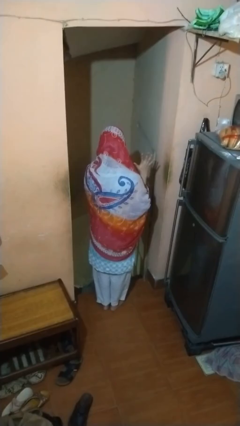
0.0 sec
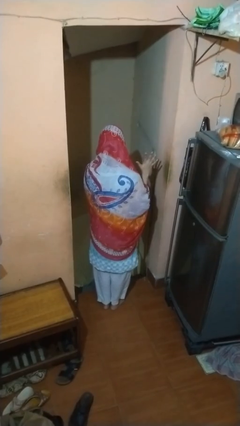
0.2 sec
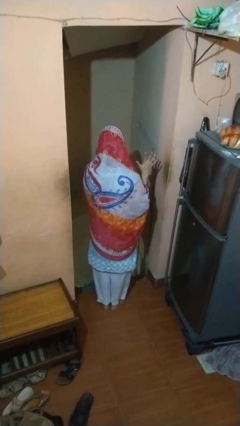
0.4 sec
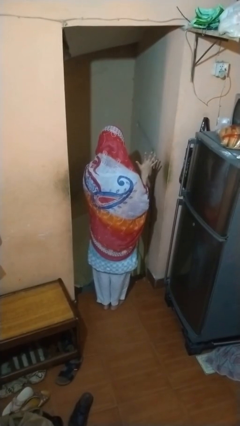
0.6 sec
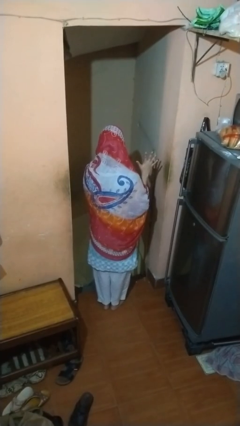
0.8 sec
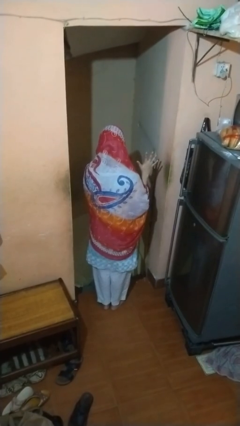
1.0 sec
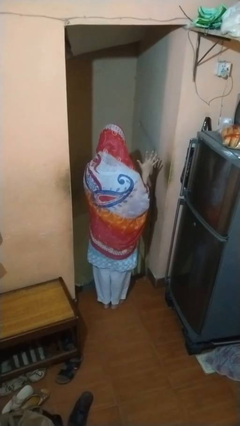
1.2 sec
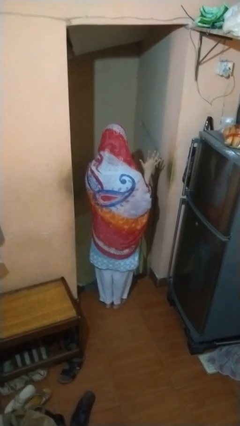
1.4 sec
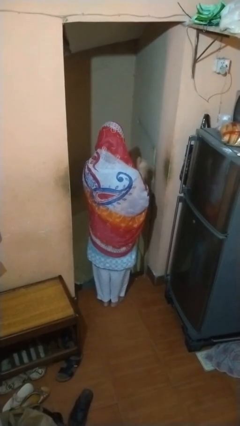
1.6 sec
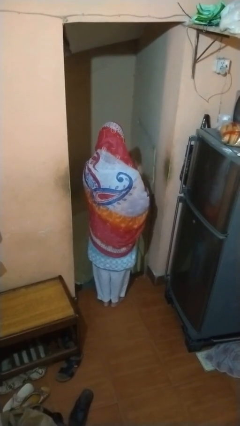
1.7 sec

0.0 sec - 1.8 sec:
person gestures number five

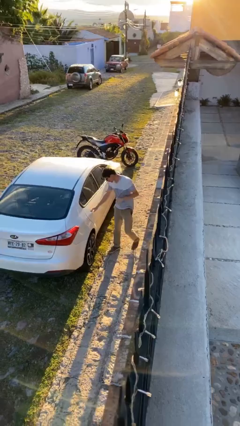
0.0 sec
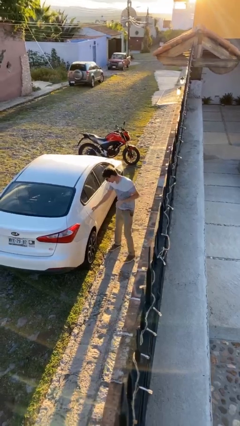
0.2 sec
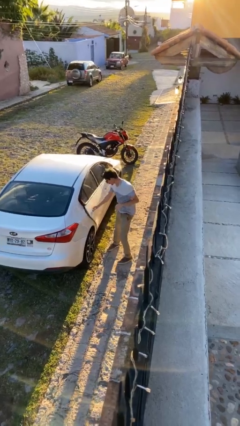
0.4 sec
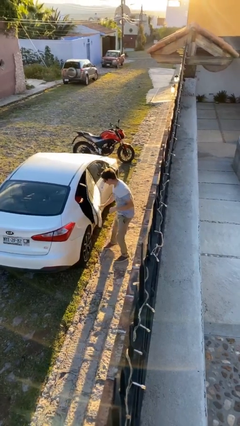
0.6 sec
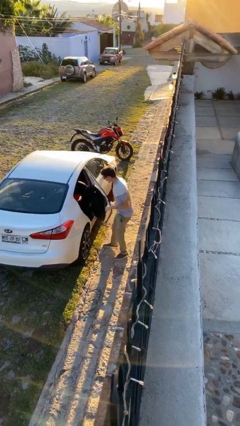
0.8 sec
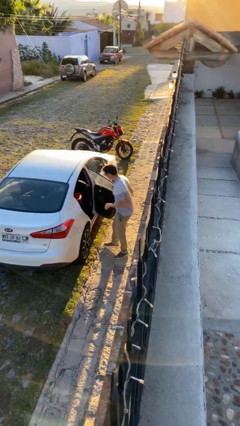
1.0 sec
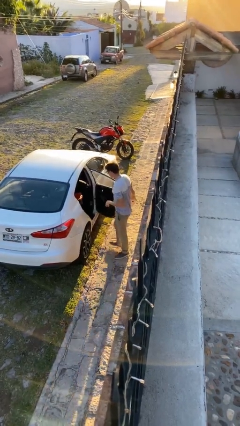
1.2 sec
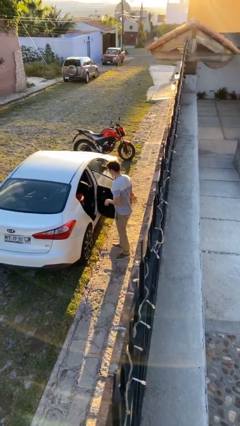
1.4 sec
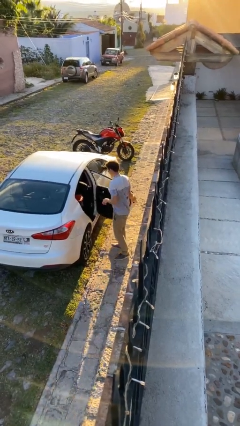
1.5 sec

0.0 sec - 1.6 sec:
person opens car door

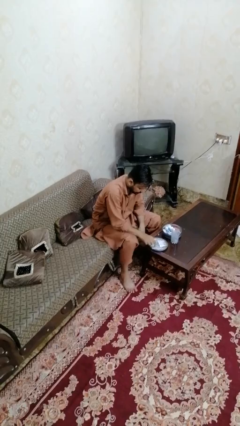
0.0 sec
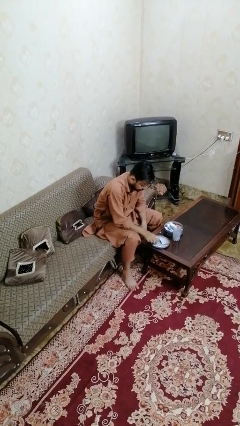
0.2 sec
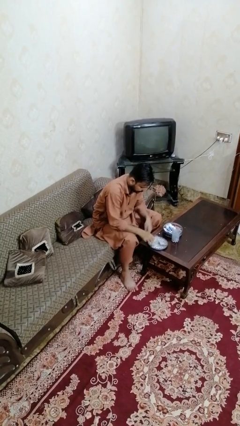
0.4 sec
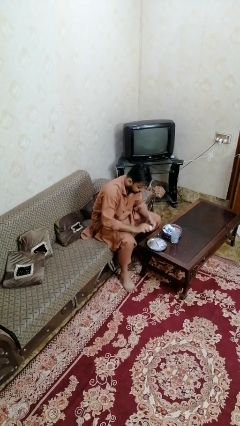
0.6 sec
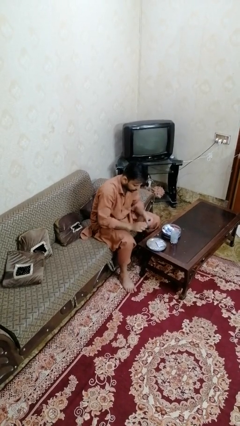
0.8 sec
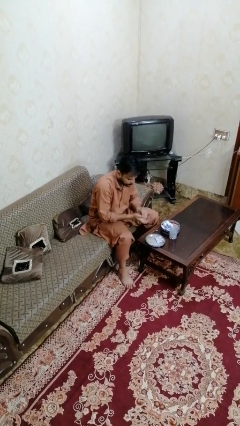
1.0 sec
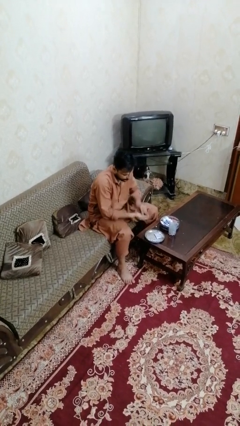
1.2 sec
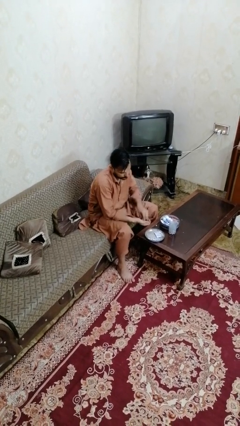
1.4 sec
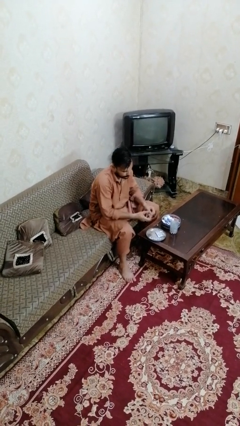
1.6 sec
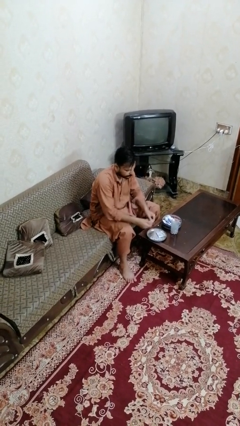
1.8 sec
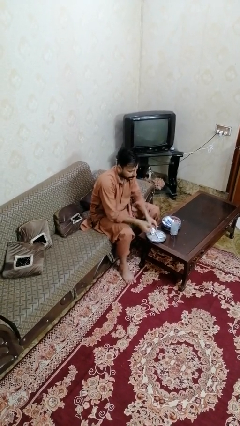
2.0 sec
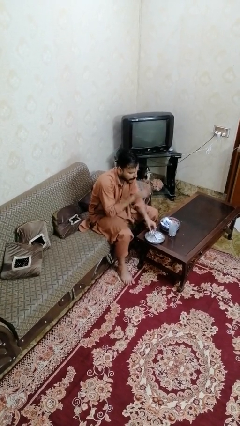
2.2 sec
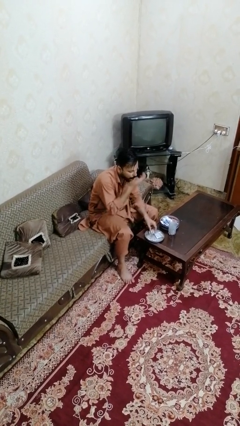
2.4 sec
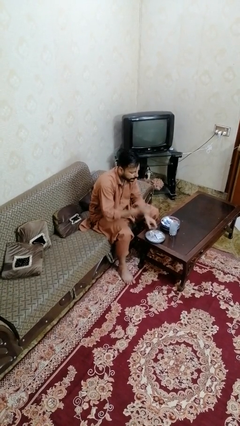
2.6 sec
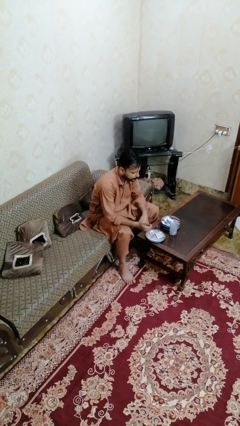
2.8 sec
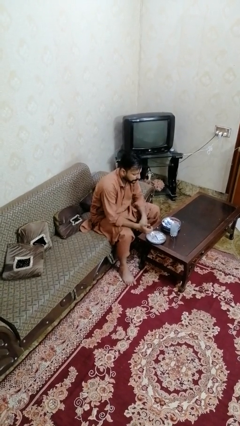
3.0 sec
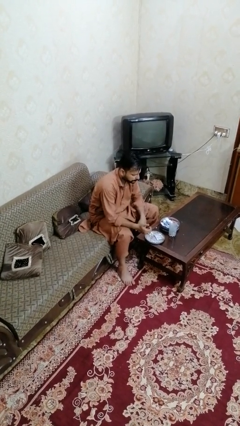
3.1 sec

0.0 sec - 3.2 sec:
person takes medicine pills

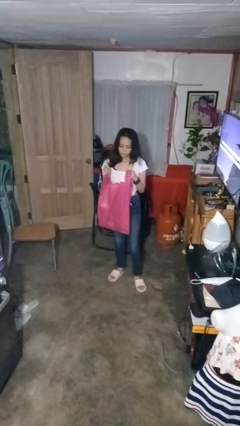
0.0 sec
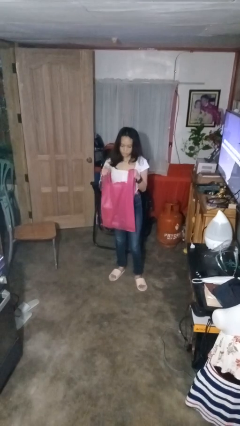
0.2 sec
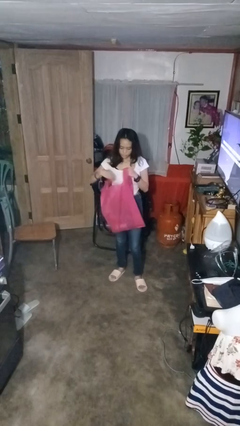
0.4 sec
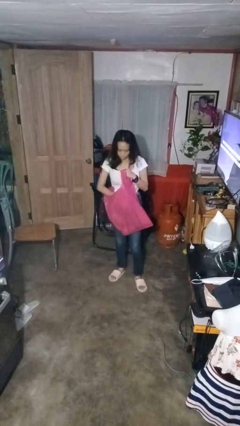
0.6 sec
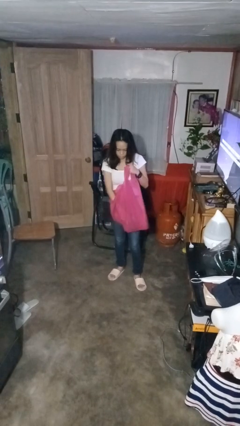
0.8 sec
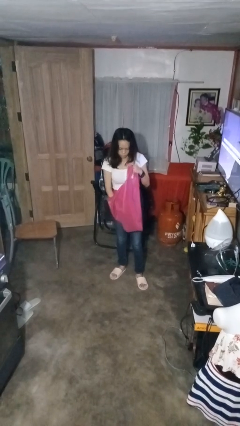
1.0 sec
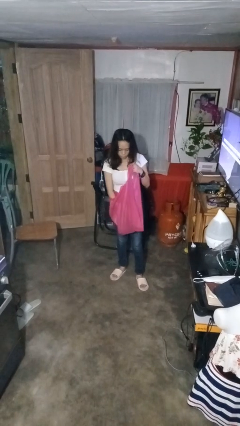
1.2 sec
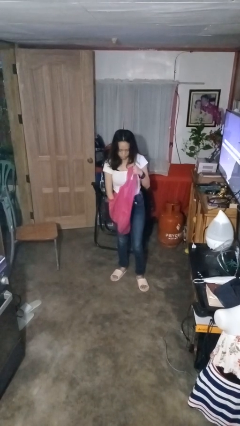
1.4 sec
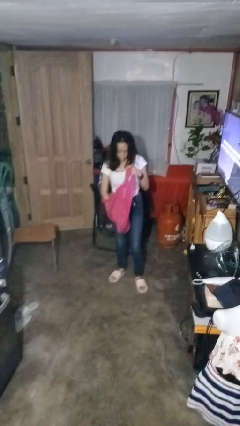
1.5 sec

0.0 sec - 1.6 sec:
person searches in bag

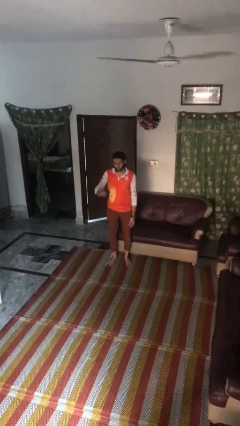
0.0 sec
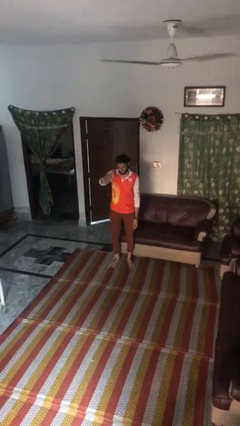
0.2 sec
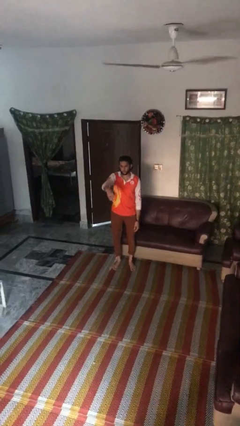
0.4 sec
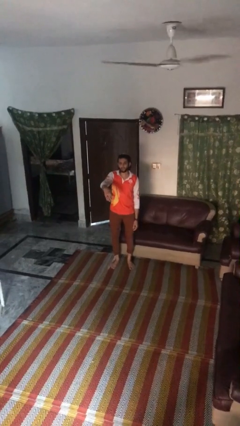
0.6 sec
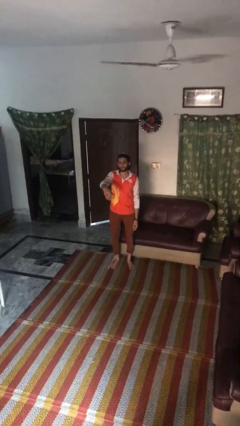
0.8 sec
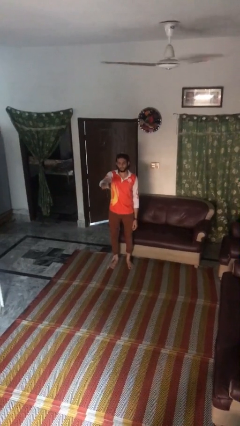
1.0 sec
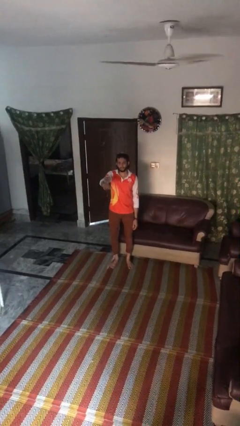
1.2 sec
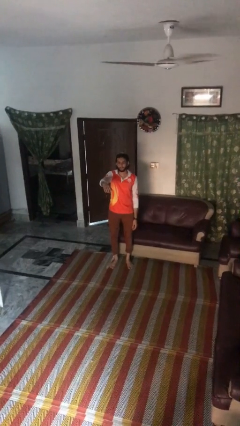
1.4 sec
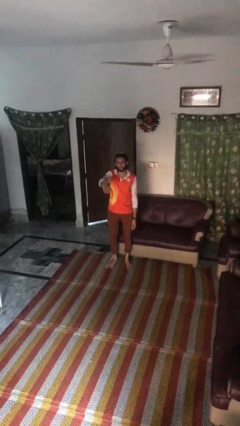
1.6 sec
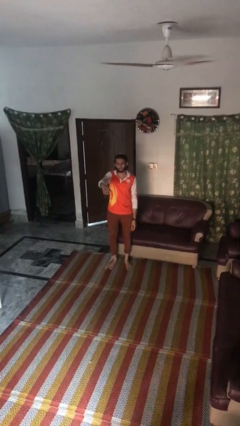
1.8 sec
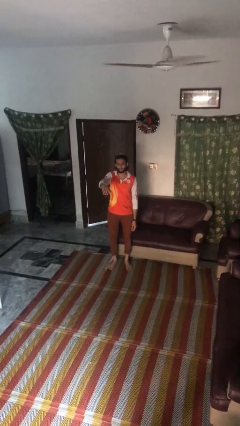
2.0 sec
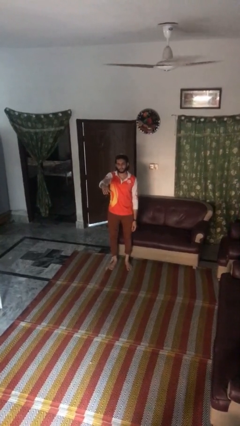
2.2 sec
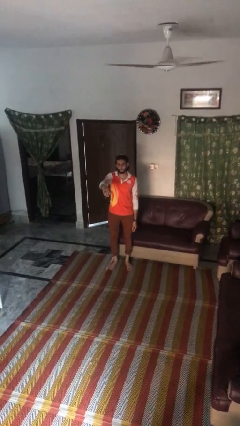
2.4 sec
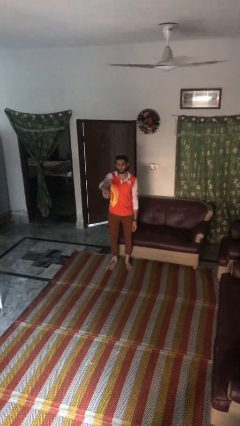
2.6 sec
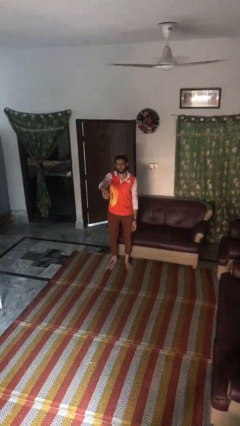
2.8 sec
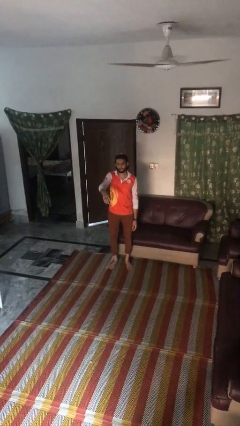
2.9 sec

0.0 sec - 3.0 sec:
person gestures come here

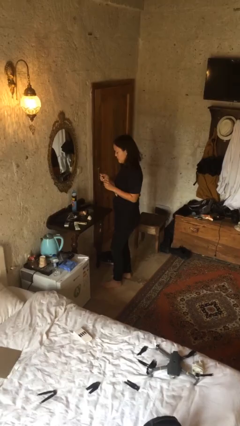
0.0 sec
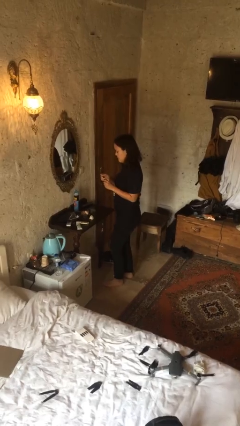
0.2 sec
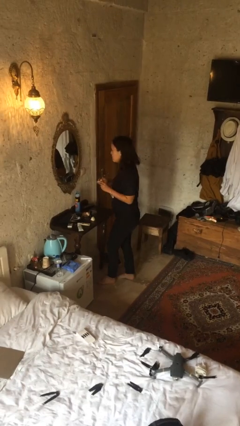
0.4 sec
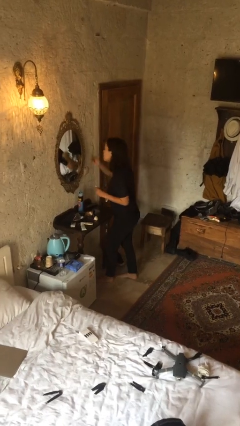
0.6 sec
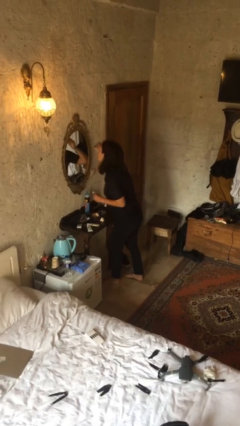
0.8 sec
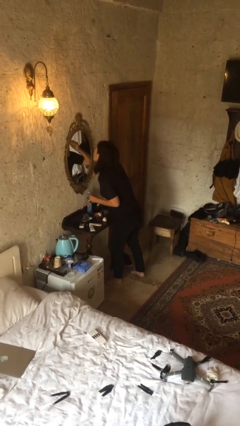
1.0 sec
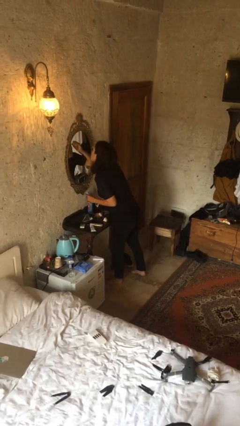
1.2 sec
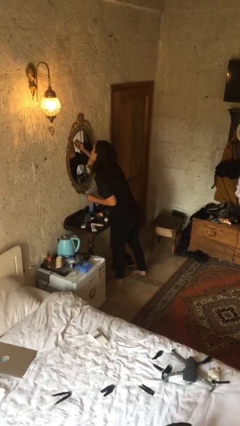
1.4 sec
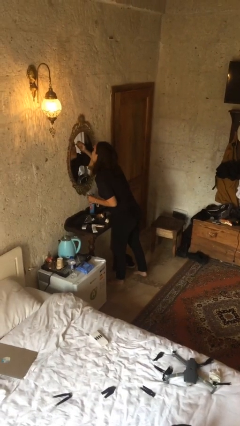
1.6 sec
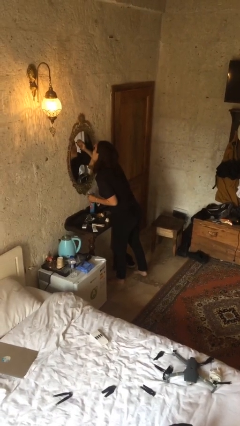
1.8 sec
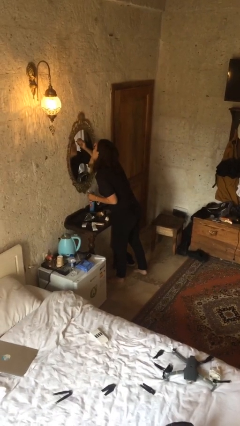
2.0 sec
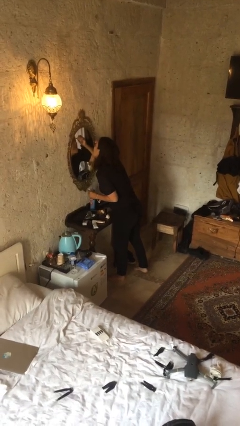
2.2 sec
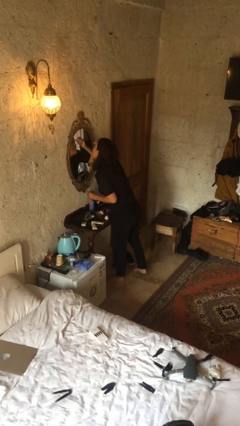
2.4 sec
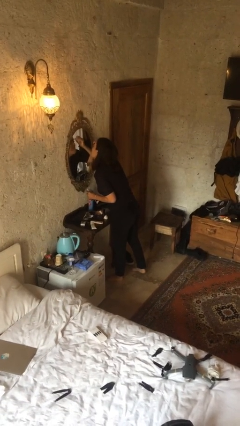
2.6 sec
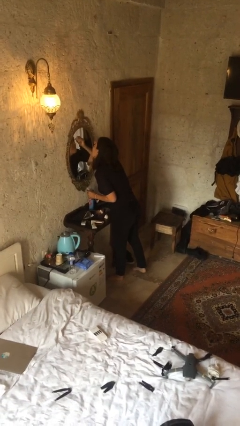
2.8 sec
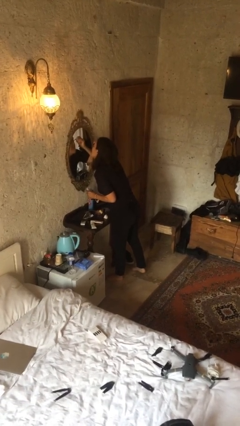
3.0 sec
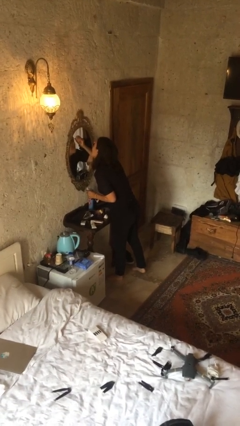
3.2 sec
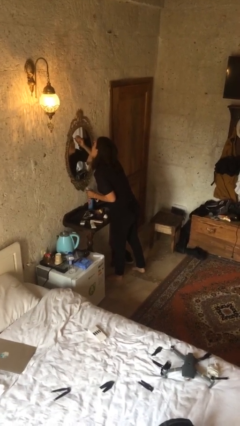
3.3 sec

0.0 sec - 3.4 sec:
person applies eye makeup

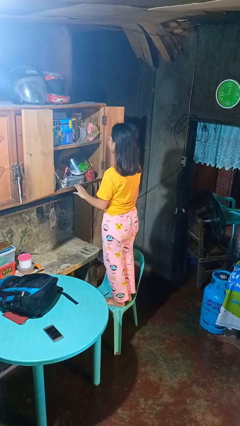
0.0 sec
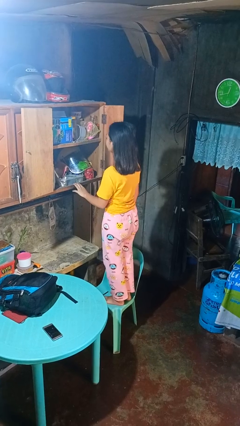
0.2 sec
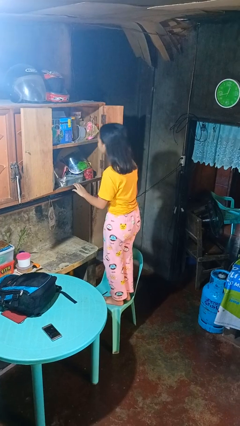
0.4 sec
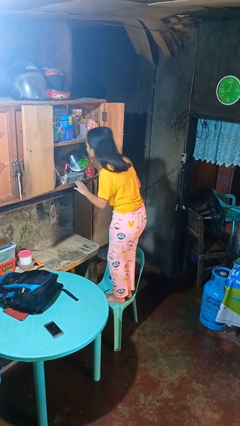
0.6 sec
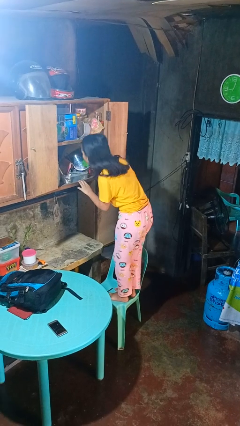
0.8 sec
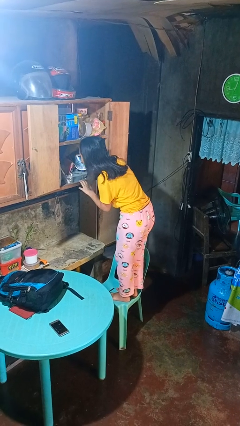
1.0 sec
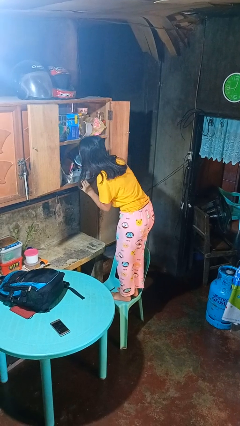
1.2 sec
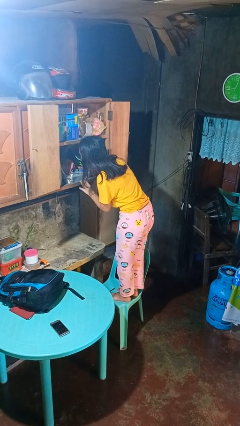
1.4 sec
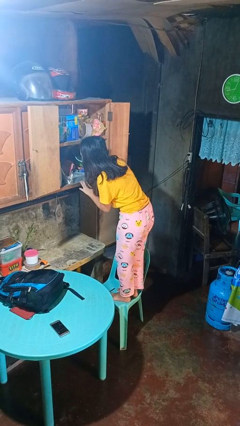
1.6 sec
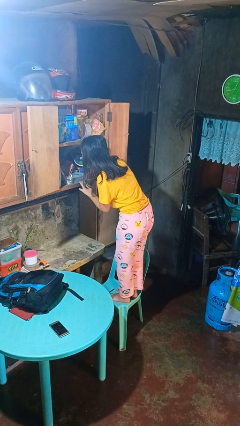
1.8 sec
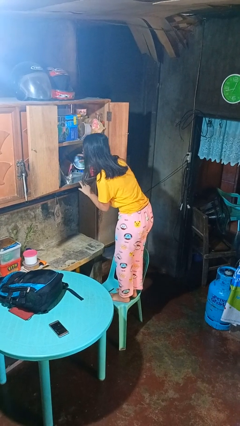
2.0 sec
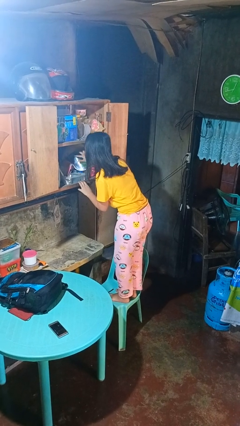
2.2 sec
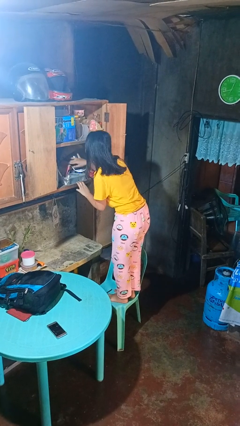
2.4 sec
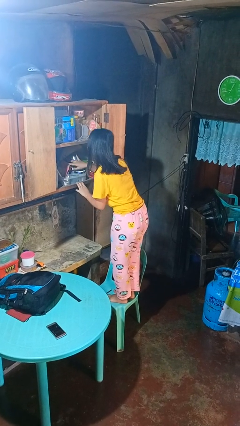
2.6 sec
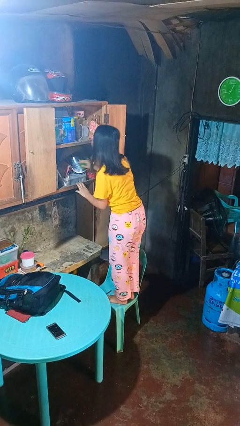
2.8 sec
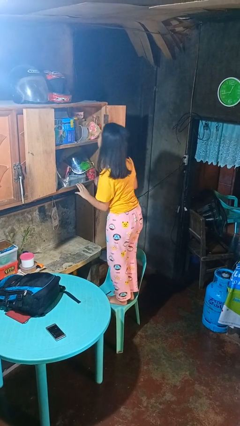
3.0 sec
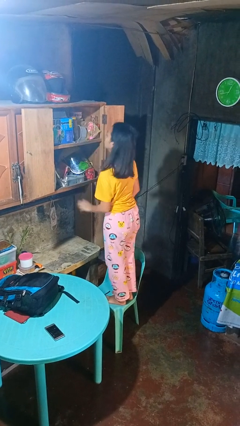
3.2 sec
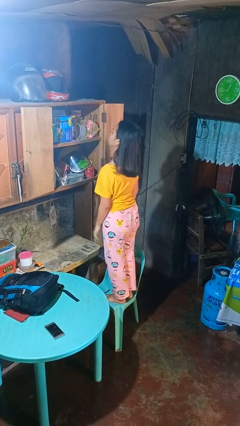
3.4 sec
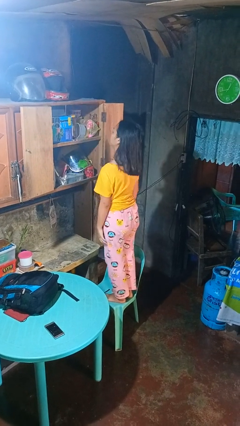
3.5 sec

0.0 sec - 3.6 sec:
person searches in cabinet
